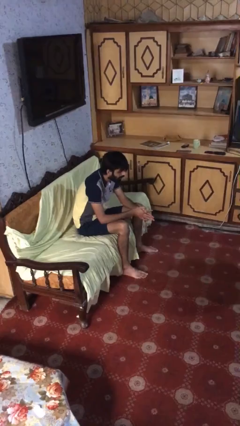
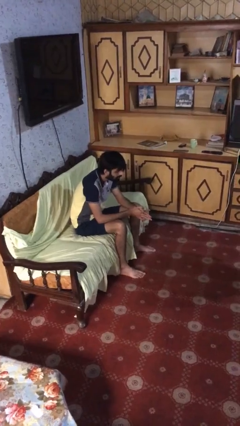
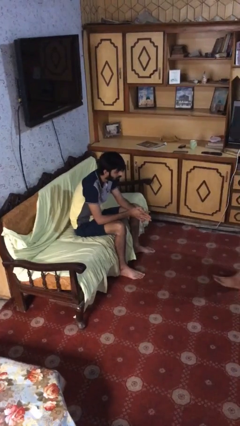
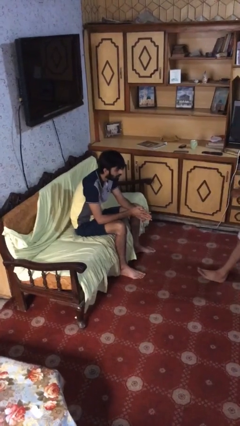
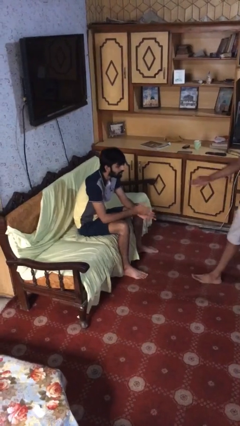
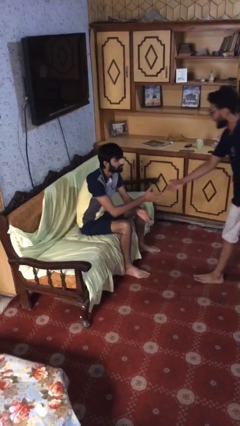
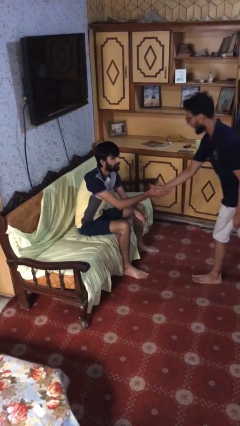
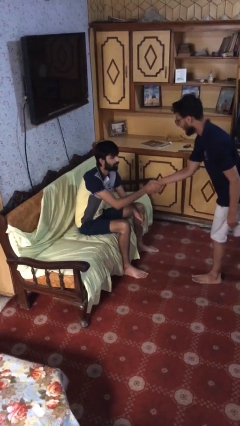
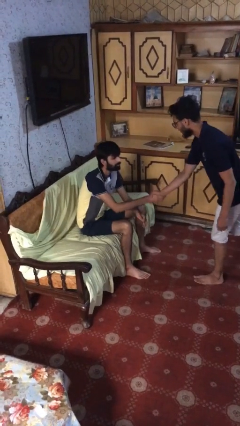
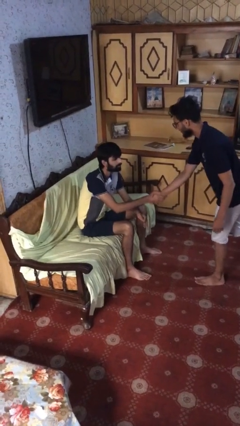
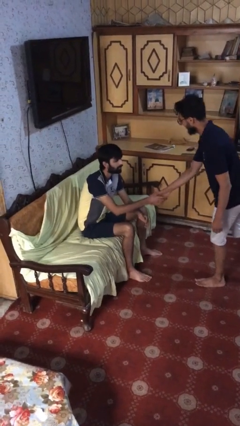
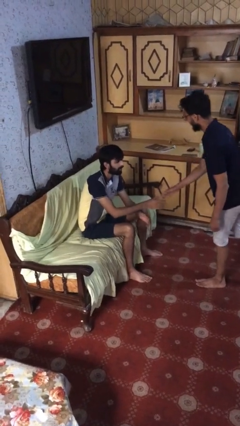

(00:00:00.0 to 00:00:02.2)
person shakes hand

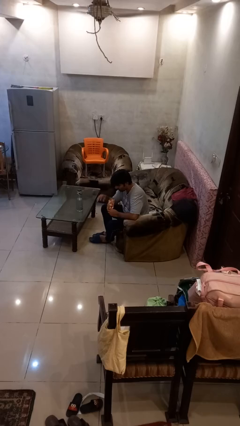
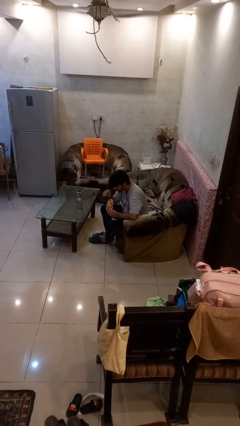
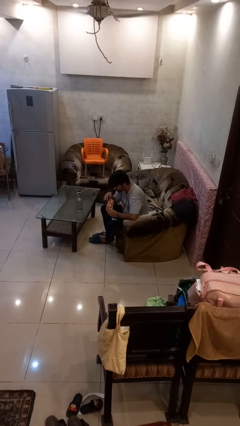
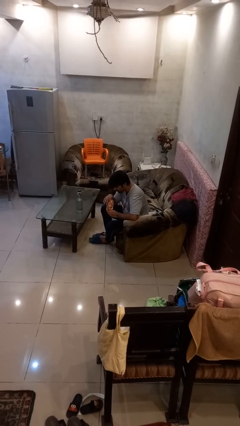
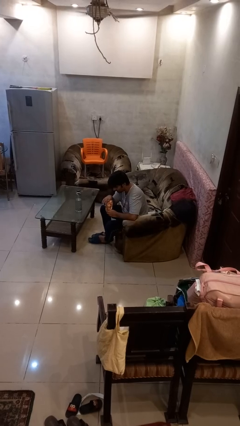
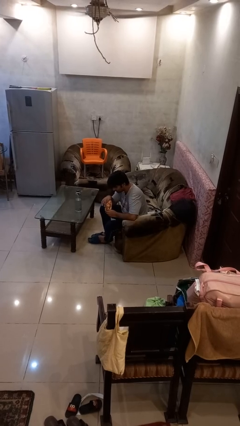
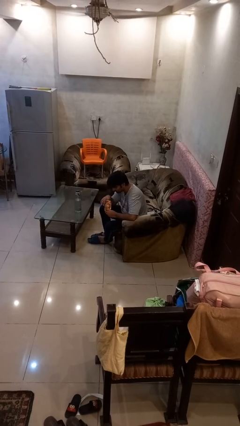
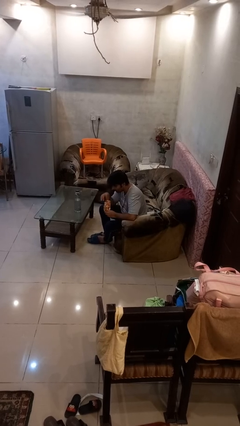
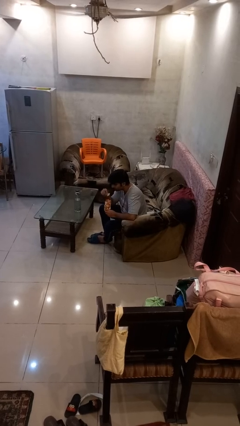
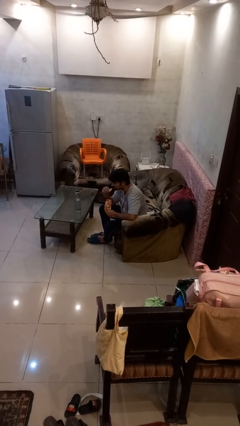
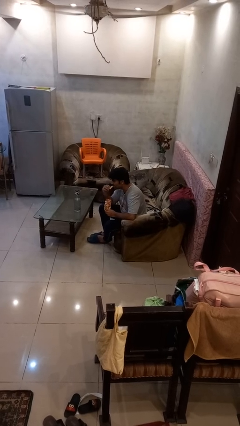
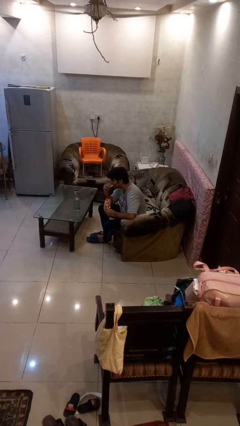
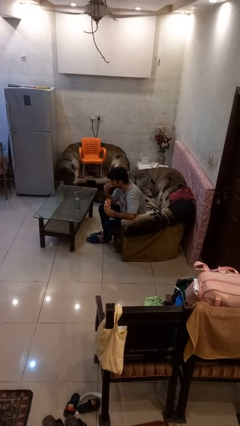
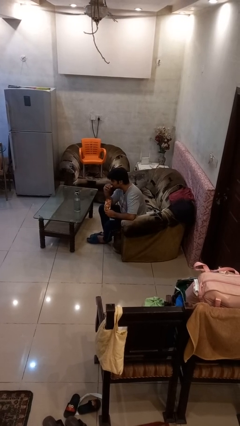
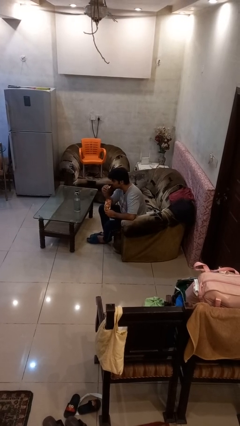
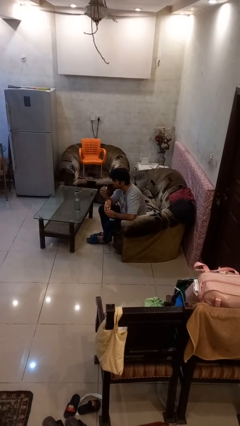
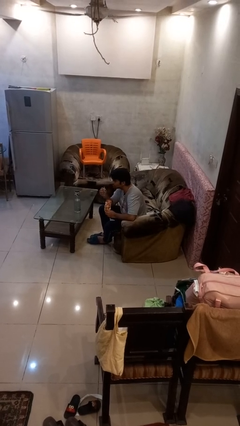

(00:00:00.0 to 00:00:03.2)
person eats snack from bag

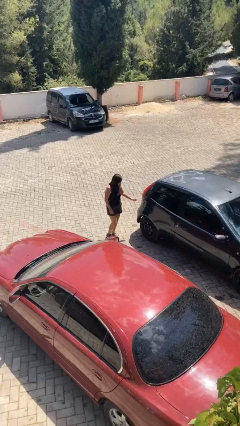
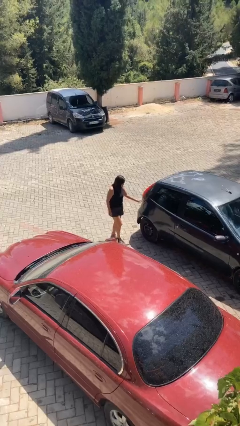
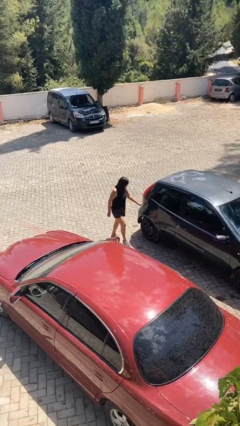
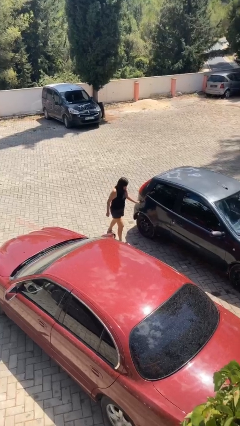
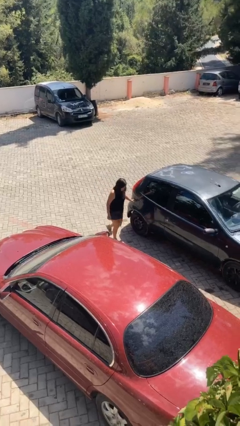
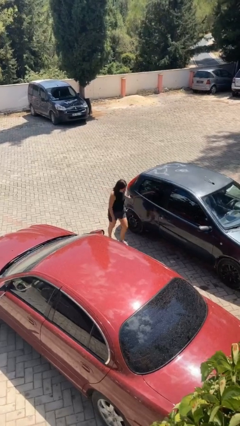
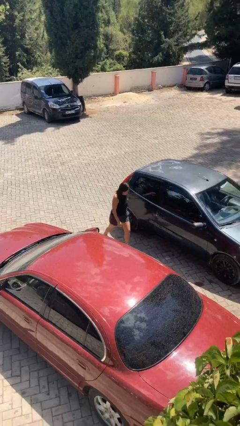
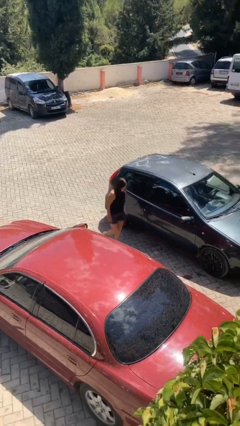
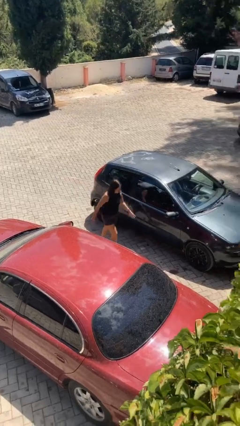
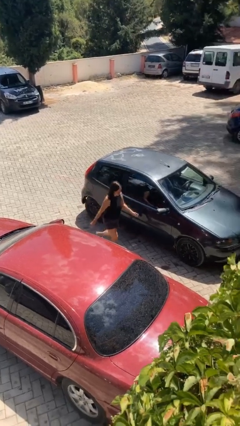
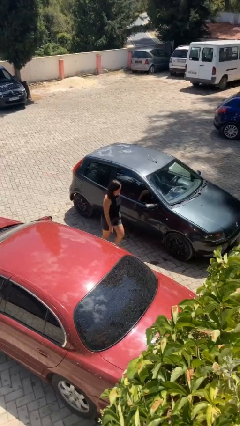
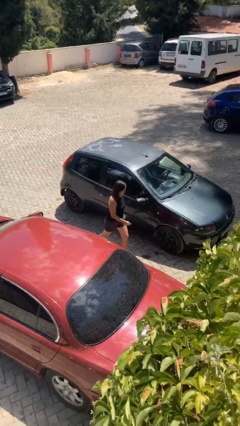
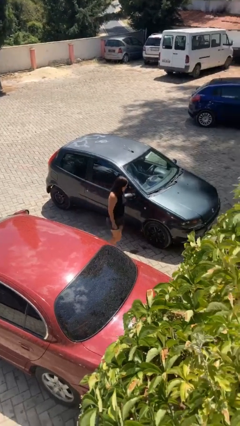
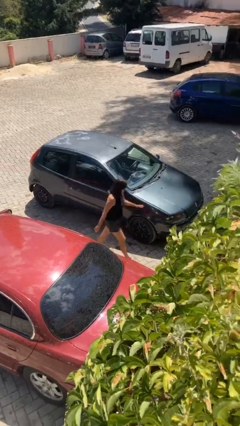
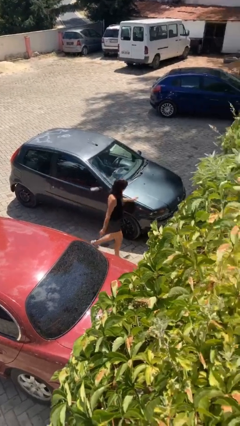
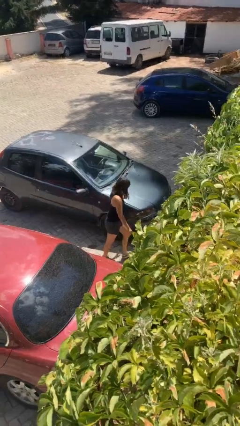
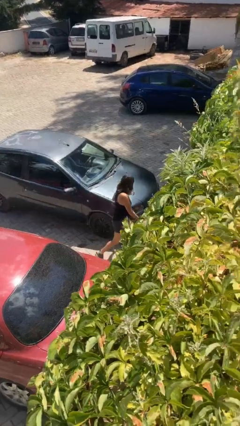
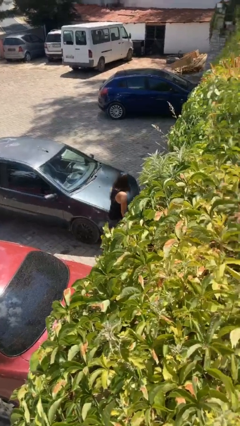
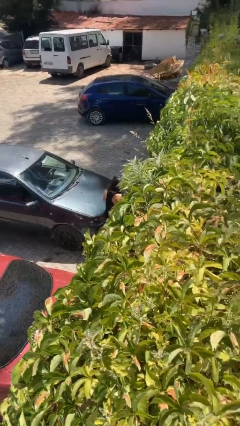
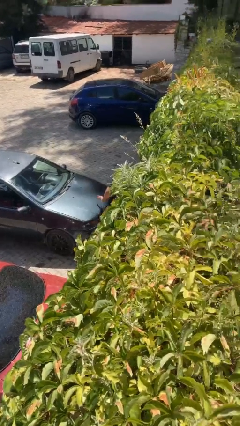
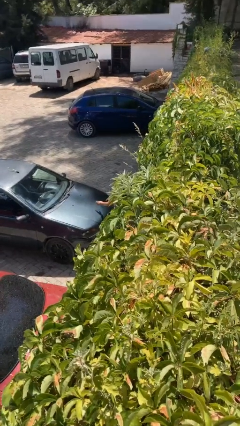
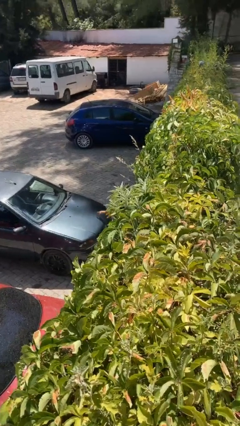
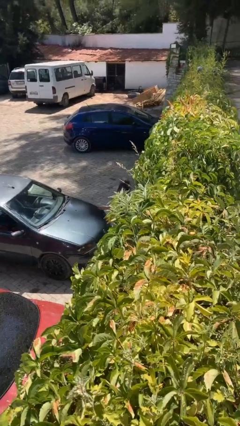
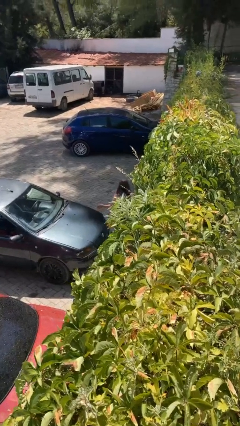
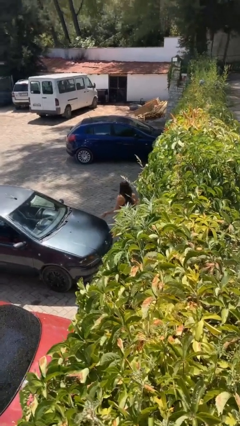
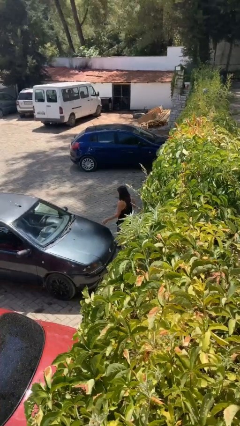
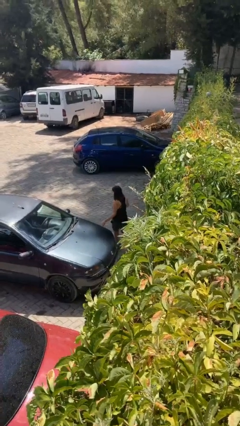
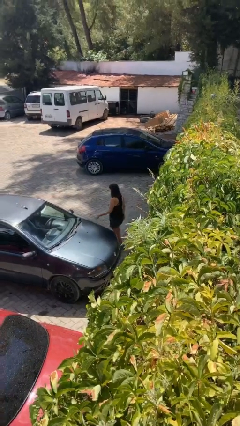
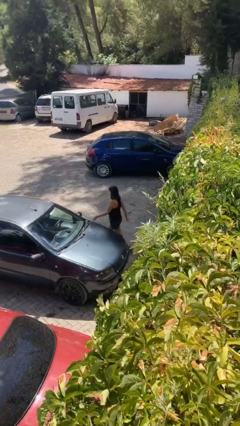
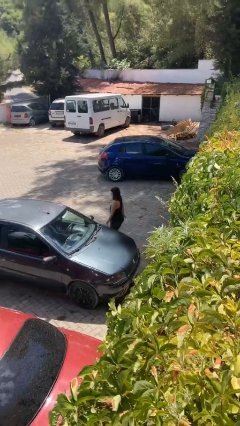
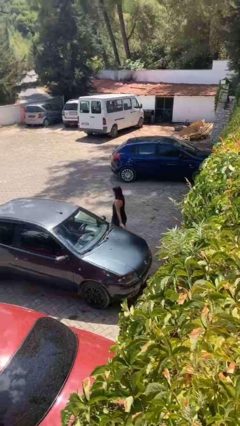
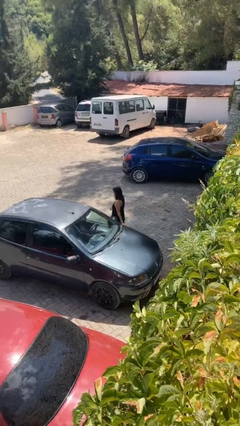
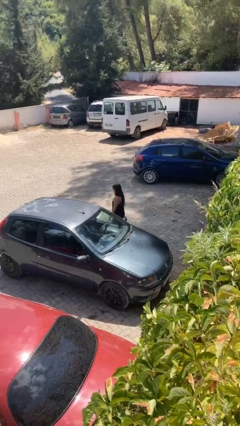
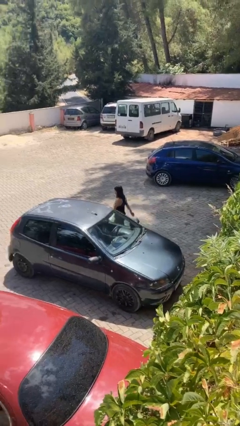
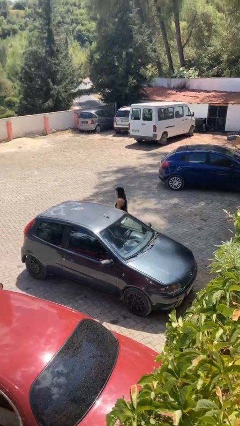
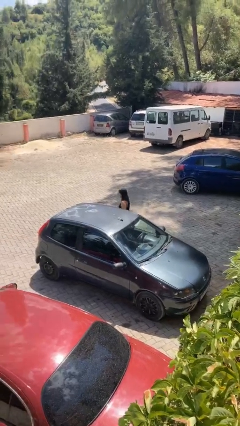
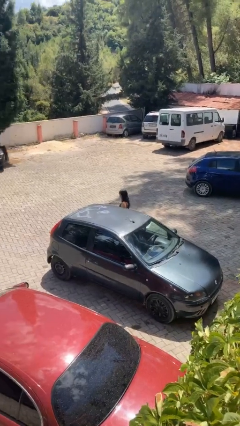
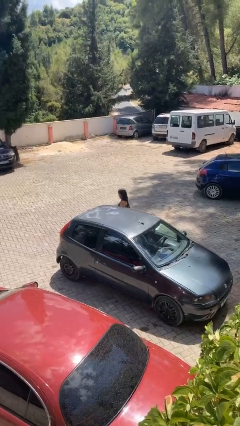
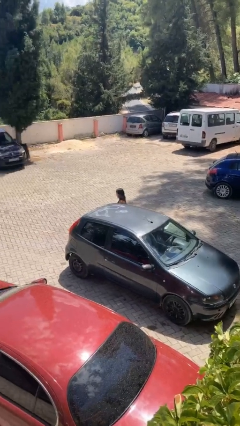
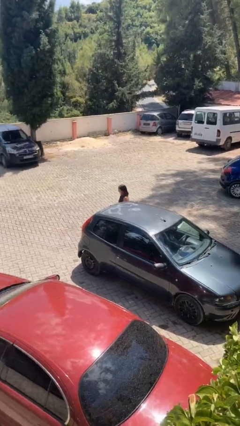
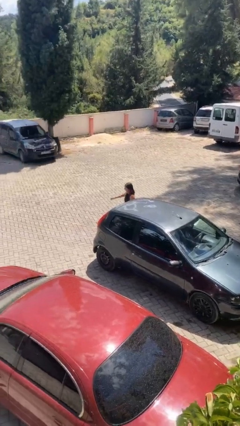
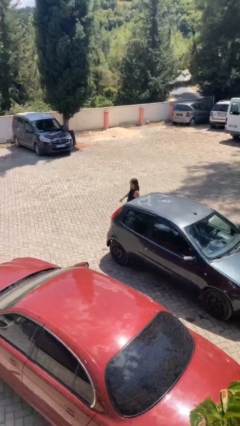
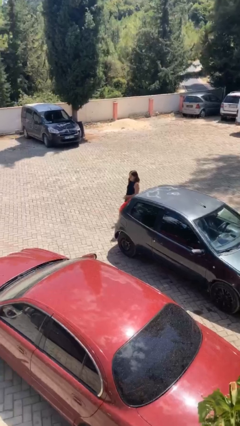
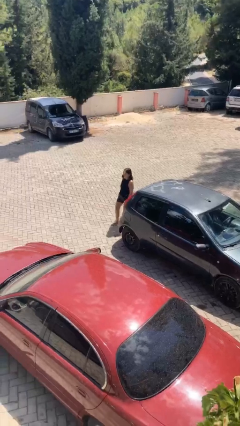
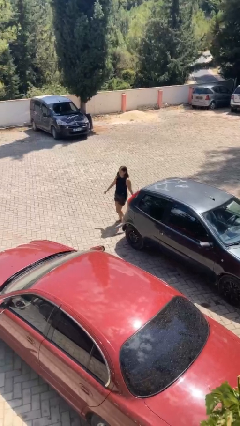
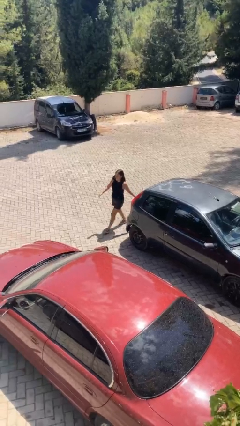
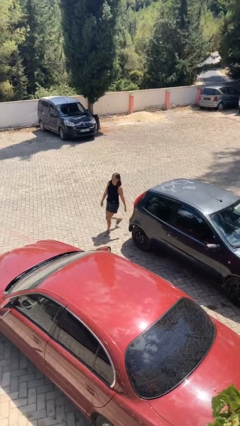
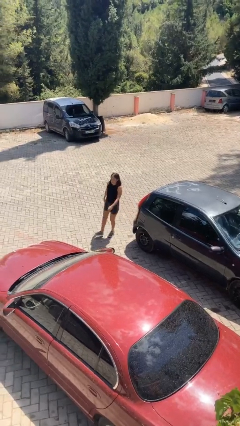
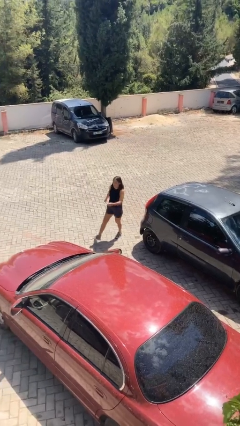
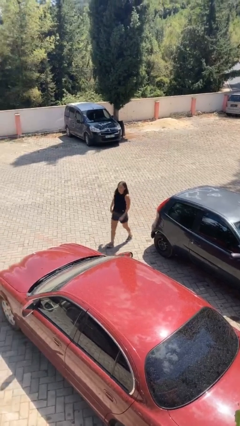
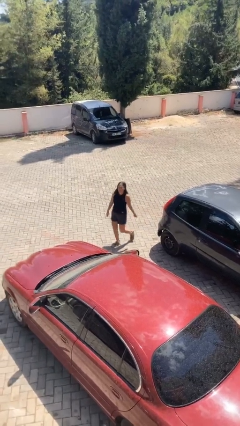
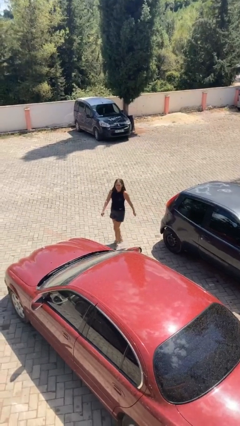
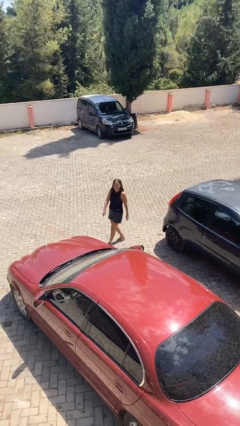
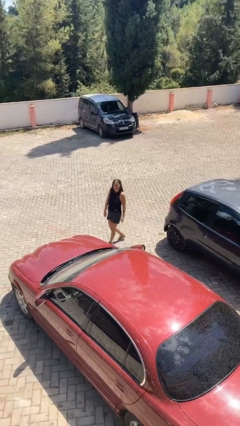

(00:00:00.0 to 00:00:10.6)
person walks around car

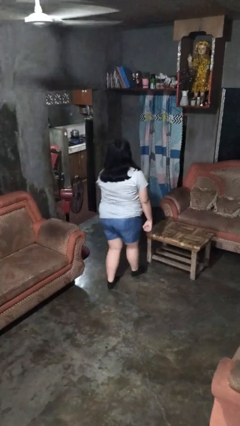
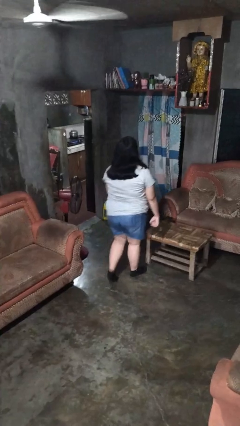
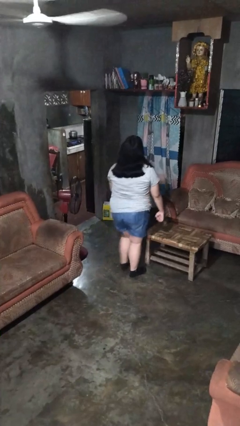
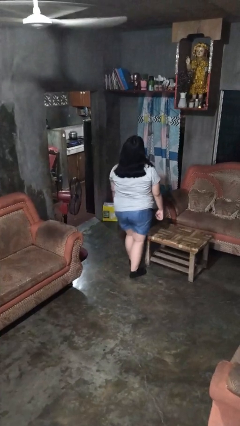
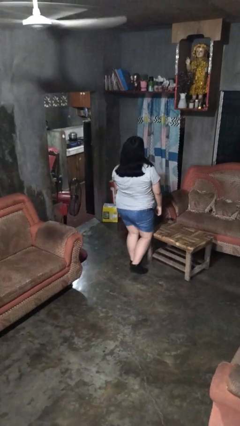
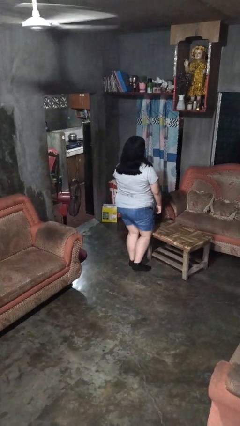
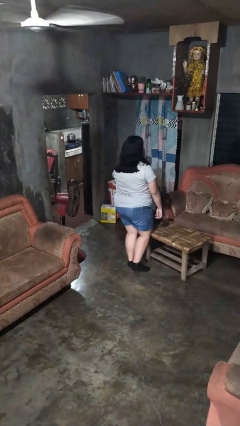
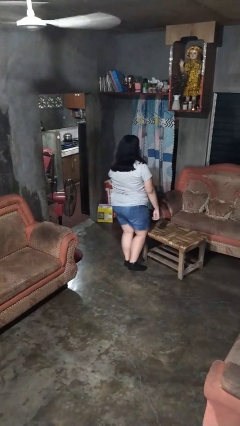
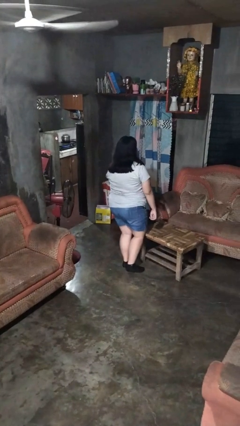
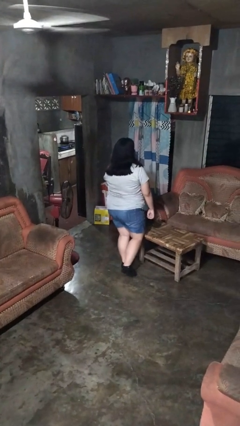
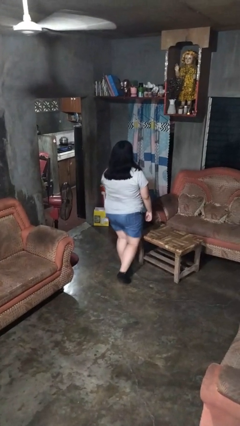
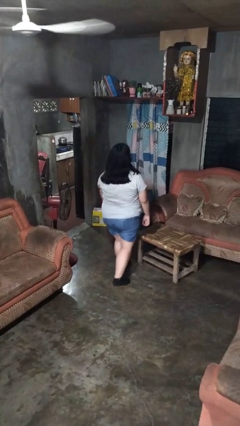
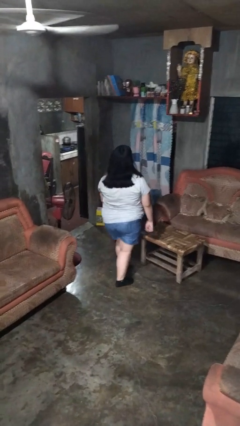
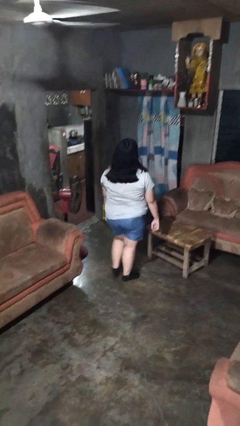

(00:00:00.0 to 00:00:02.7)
person bumps into table
